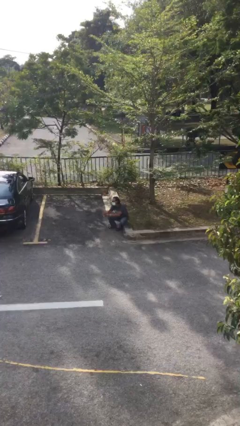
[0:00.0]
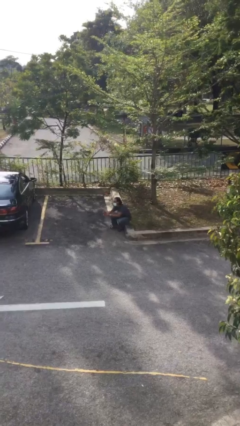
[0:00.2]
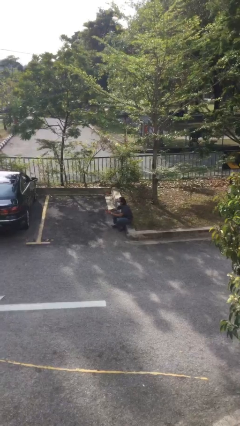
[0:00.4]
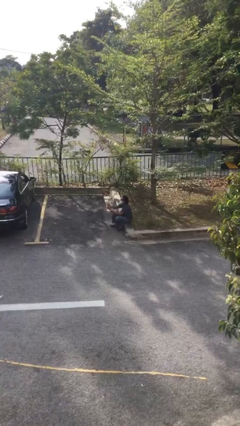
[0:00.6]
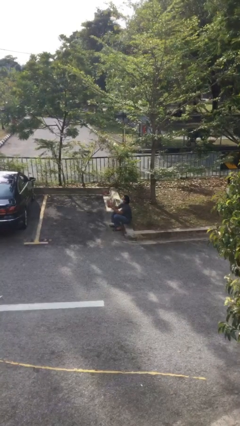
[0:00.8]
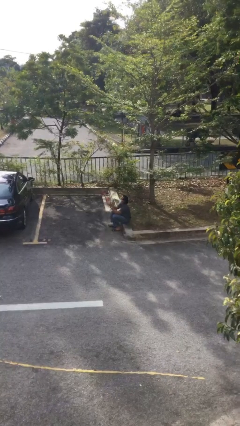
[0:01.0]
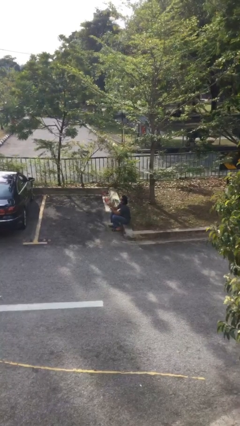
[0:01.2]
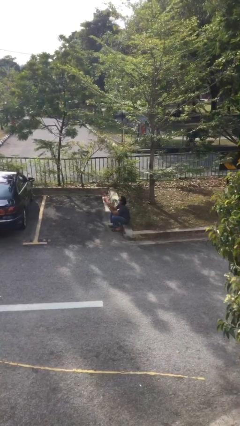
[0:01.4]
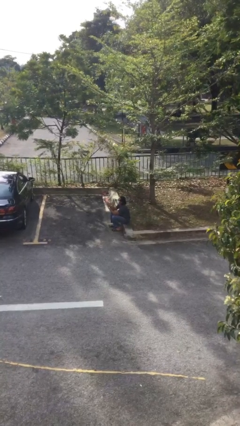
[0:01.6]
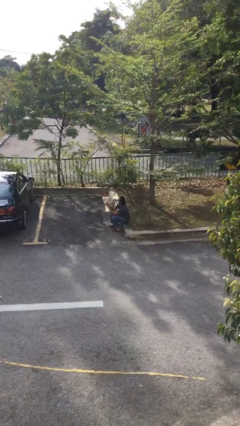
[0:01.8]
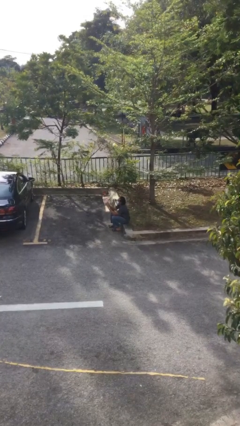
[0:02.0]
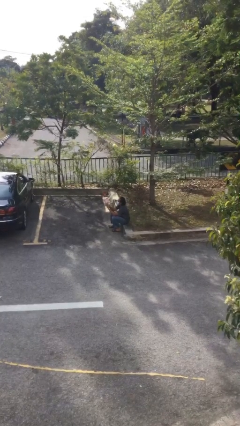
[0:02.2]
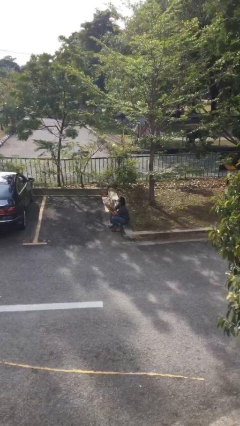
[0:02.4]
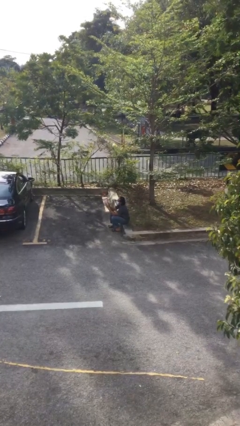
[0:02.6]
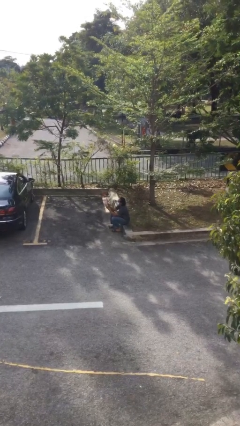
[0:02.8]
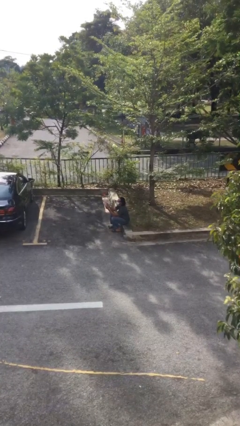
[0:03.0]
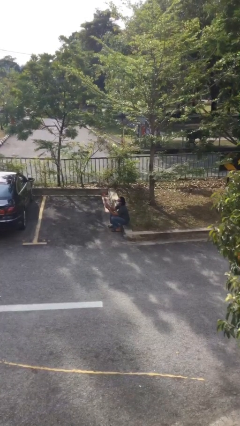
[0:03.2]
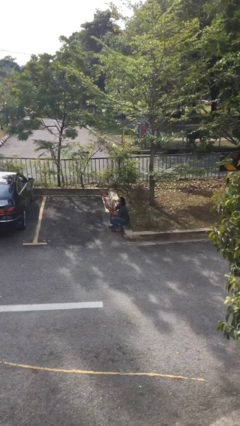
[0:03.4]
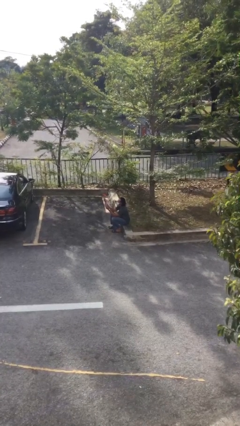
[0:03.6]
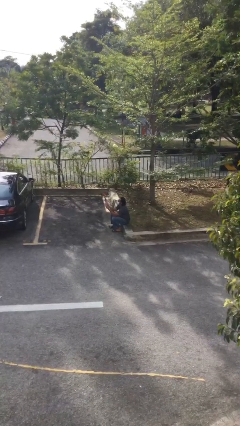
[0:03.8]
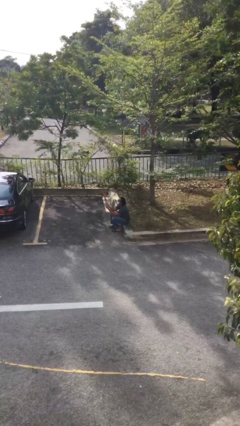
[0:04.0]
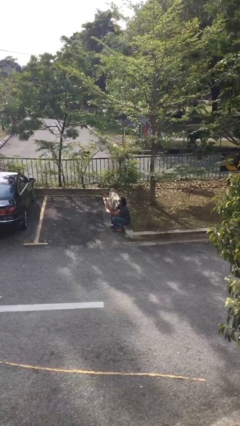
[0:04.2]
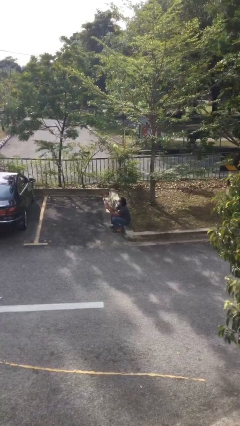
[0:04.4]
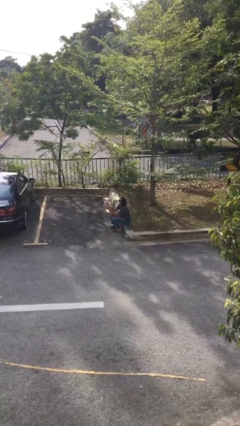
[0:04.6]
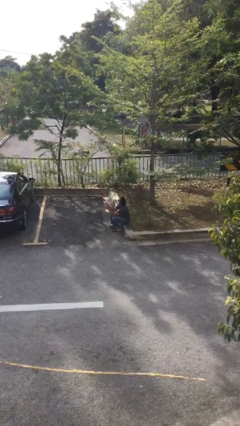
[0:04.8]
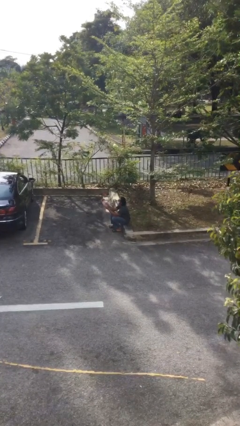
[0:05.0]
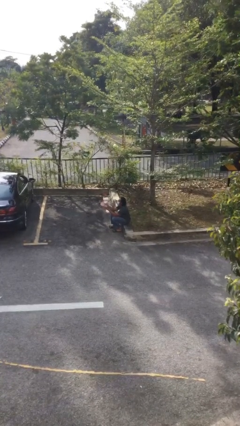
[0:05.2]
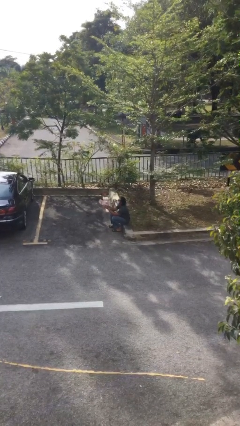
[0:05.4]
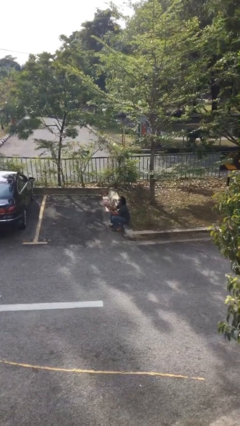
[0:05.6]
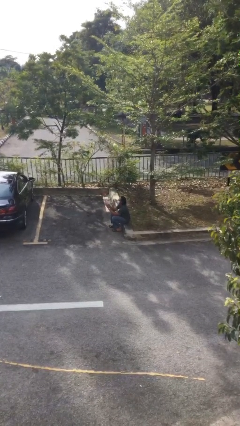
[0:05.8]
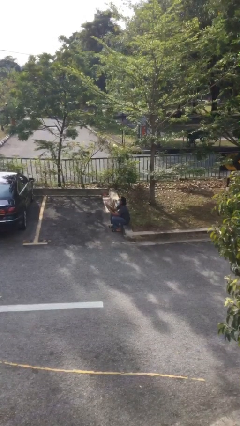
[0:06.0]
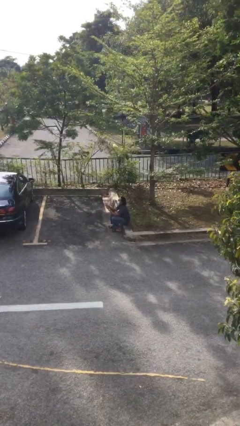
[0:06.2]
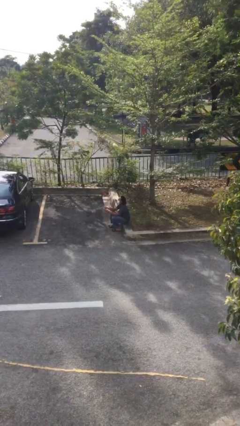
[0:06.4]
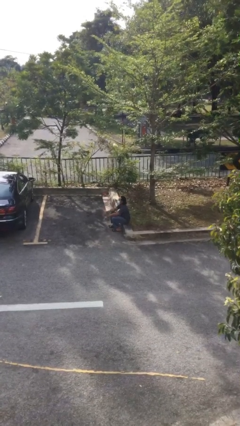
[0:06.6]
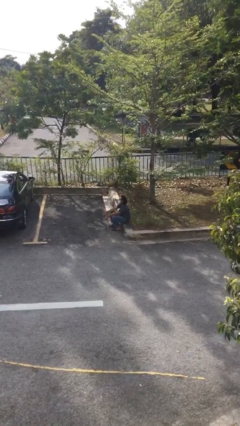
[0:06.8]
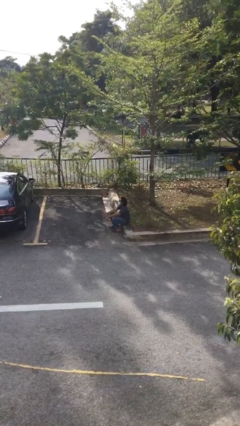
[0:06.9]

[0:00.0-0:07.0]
person reads document

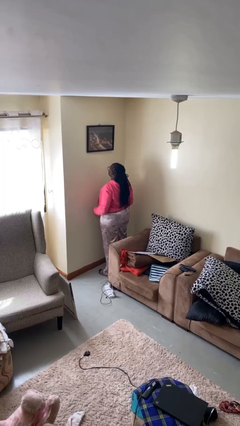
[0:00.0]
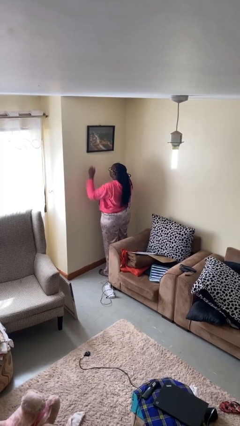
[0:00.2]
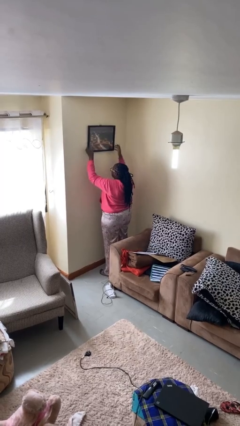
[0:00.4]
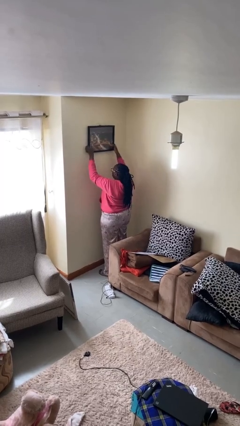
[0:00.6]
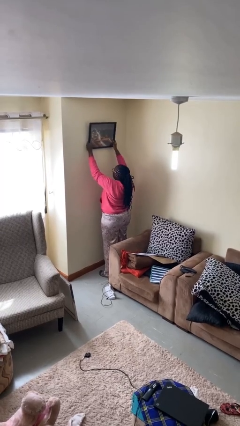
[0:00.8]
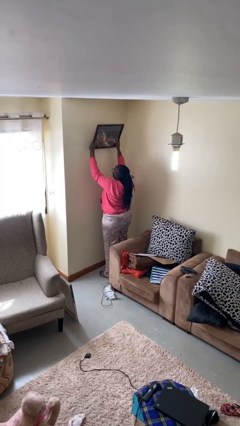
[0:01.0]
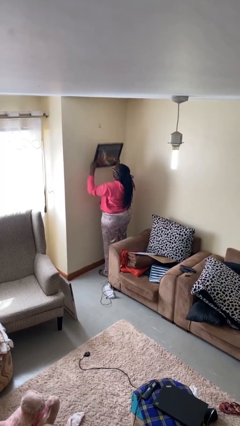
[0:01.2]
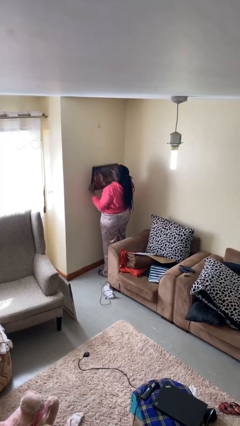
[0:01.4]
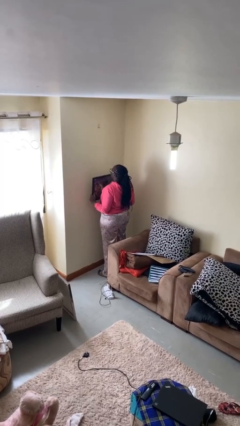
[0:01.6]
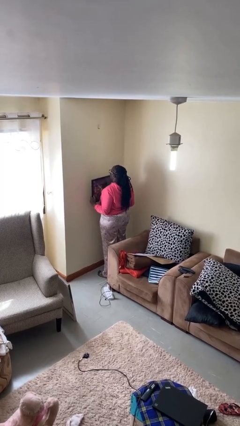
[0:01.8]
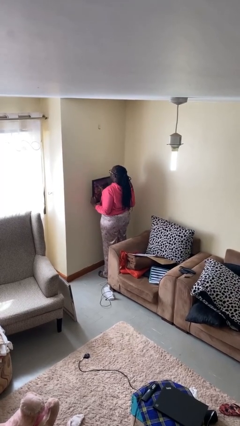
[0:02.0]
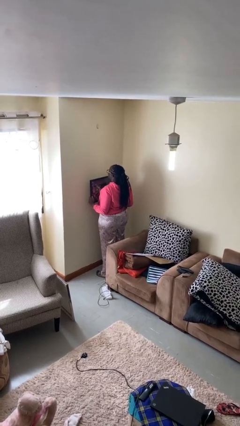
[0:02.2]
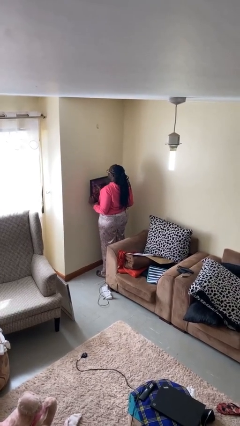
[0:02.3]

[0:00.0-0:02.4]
person takes down picture frame

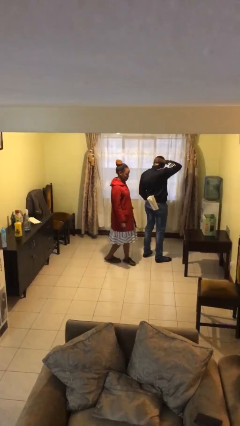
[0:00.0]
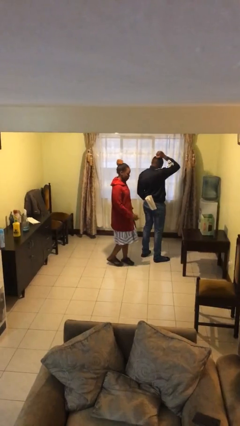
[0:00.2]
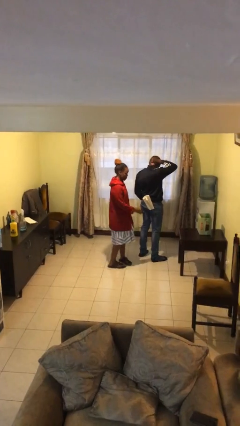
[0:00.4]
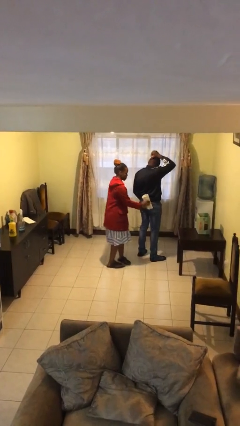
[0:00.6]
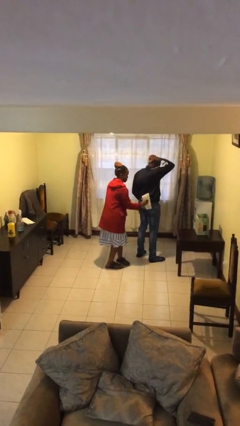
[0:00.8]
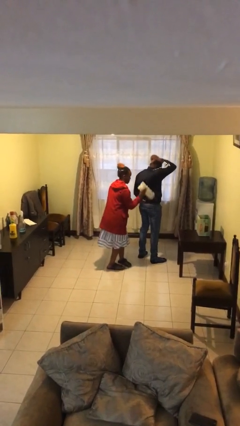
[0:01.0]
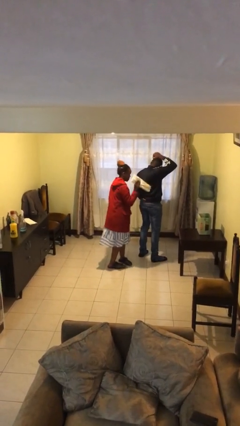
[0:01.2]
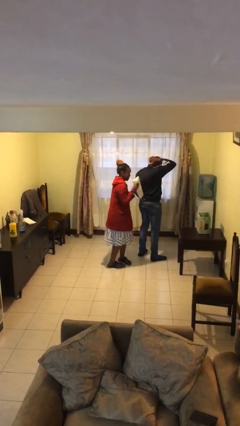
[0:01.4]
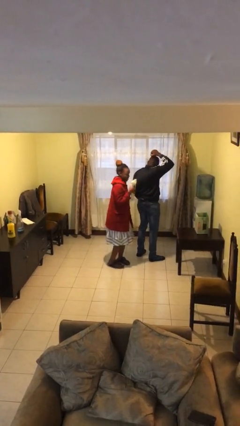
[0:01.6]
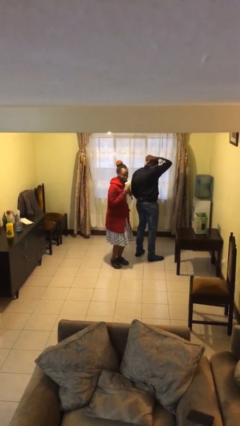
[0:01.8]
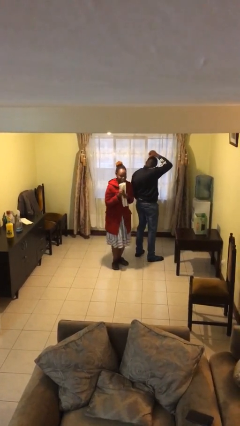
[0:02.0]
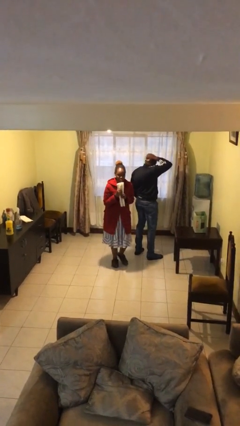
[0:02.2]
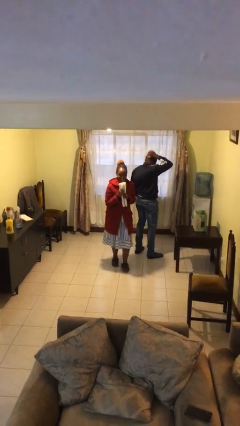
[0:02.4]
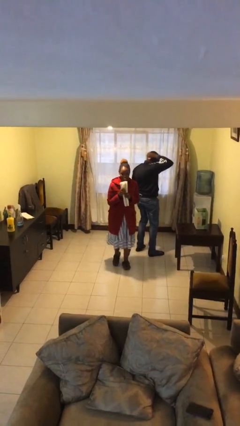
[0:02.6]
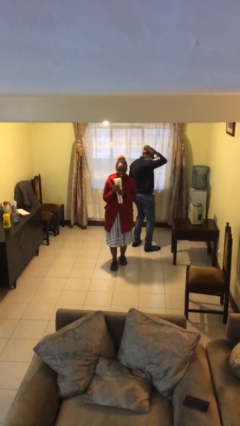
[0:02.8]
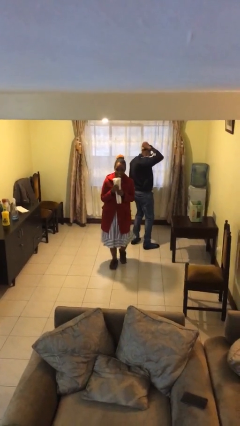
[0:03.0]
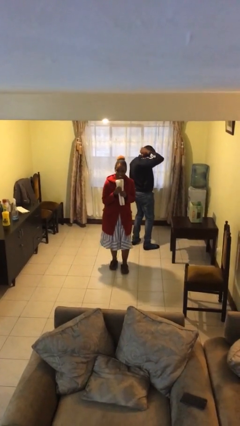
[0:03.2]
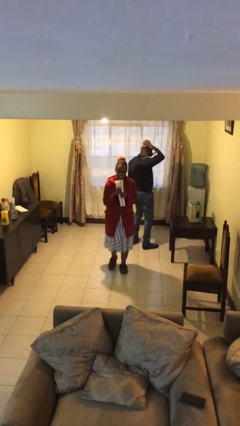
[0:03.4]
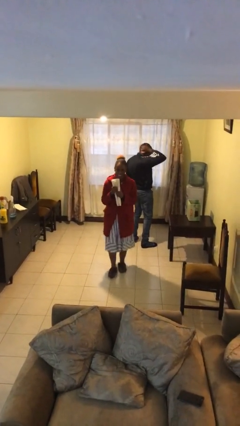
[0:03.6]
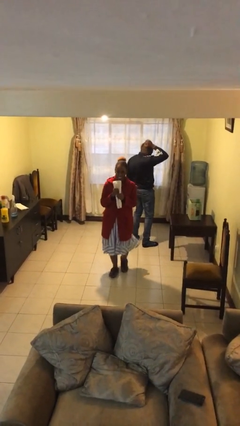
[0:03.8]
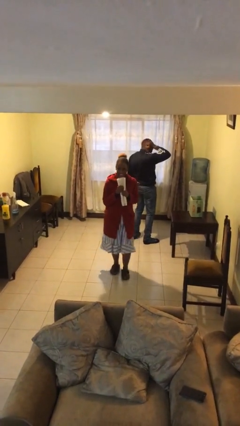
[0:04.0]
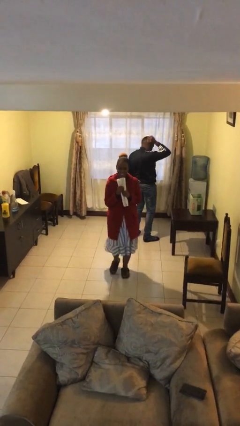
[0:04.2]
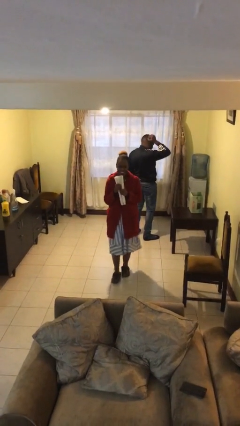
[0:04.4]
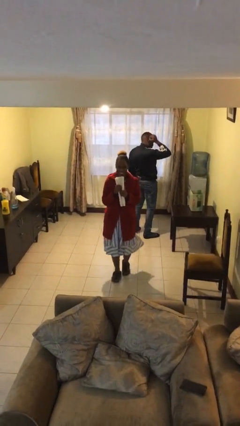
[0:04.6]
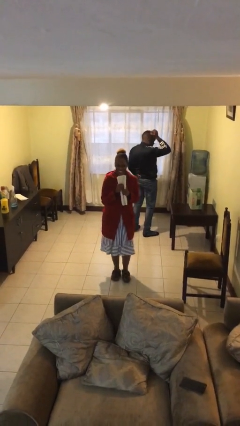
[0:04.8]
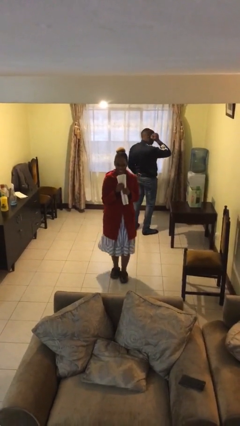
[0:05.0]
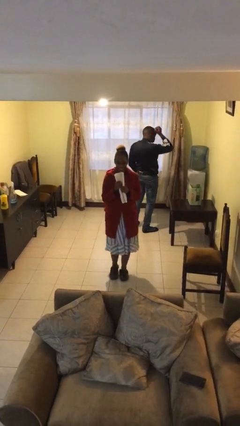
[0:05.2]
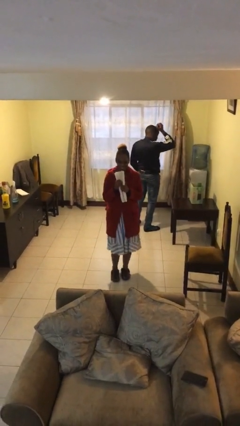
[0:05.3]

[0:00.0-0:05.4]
person steals object from person

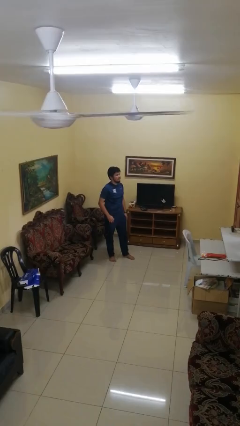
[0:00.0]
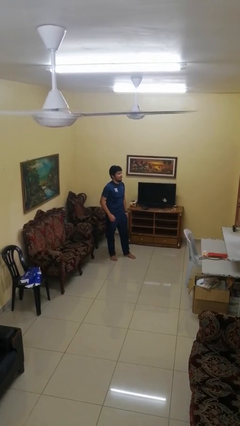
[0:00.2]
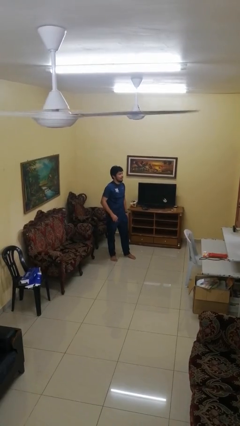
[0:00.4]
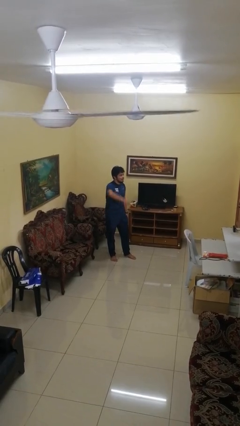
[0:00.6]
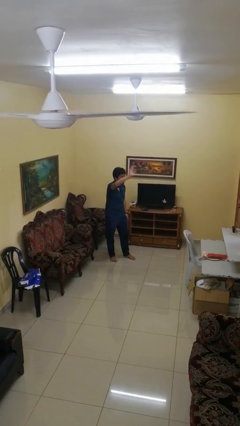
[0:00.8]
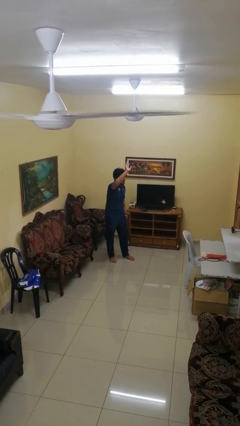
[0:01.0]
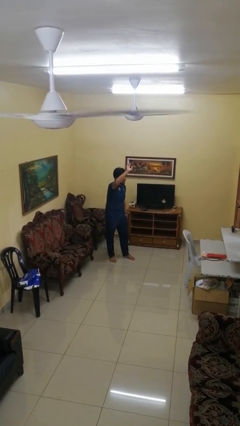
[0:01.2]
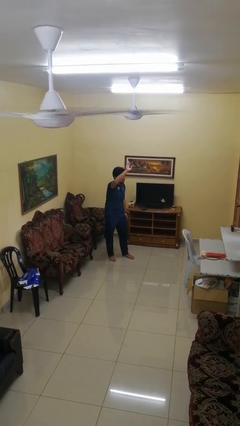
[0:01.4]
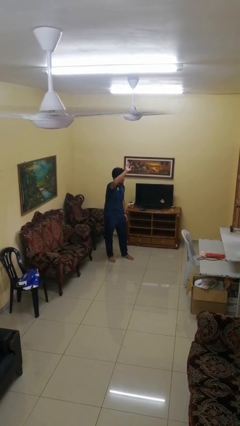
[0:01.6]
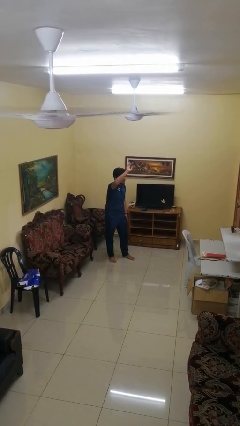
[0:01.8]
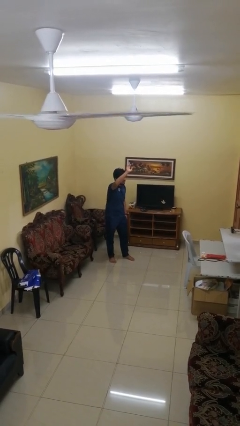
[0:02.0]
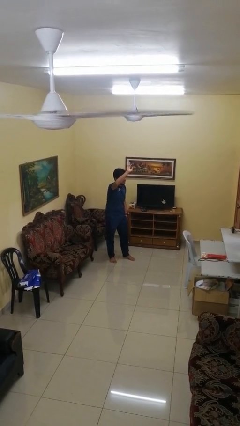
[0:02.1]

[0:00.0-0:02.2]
person gestures swipe up

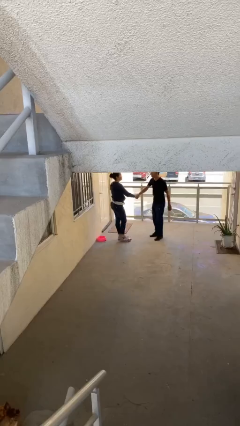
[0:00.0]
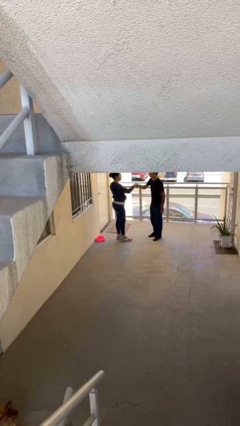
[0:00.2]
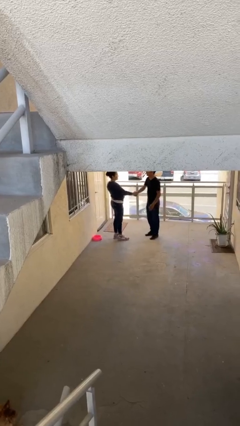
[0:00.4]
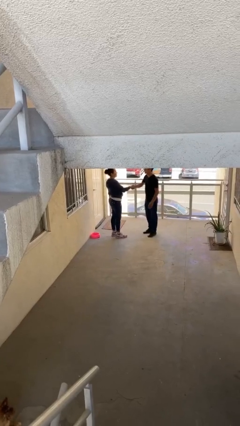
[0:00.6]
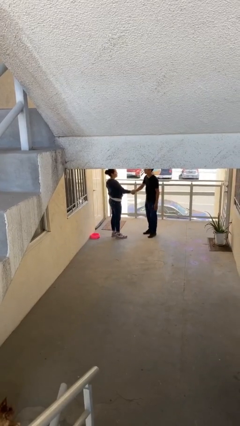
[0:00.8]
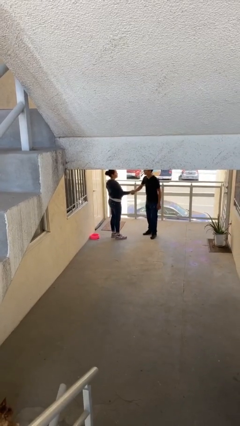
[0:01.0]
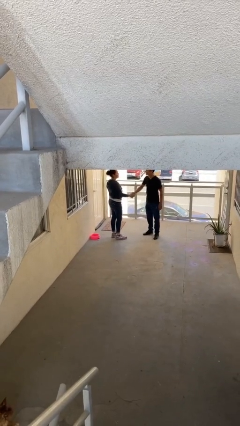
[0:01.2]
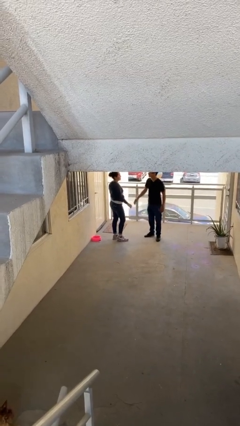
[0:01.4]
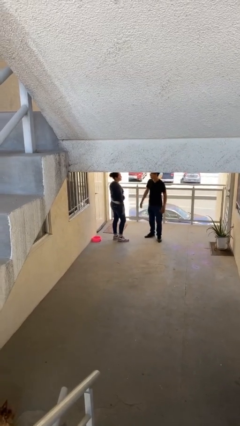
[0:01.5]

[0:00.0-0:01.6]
person shakes hand
